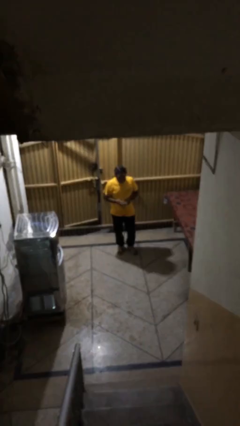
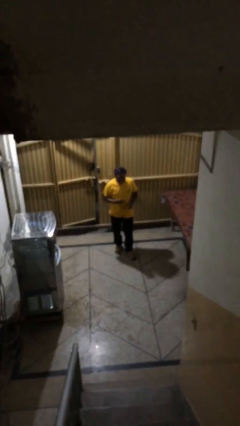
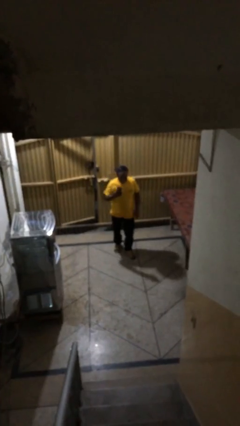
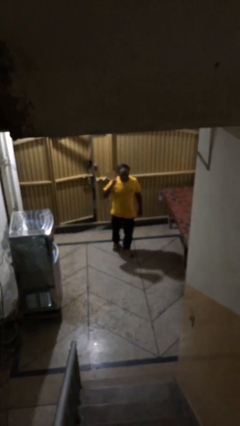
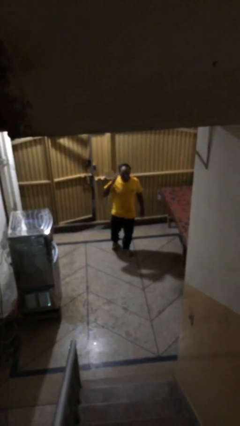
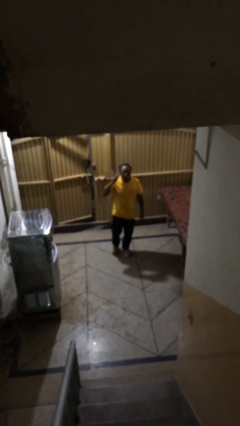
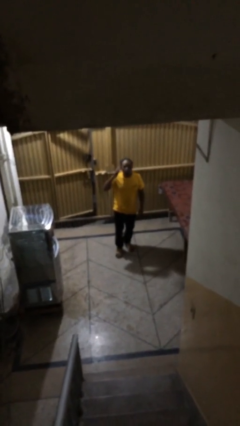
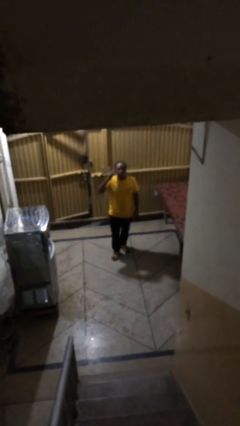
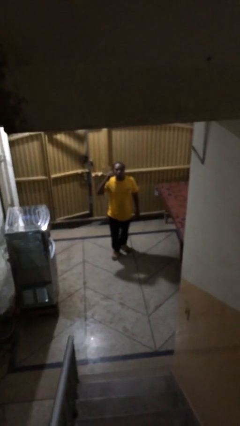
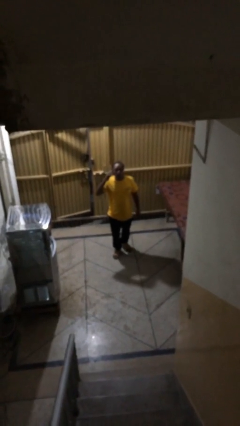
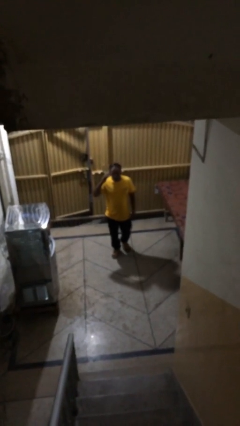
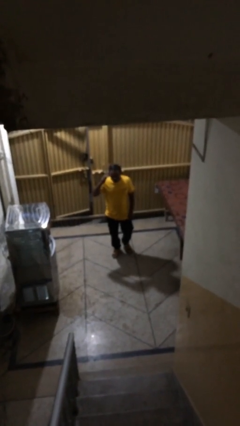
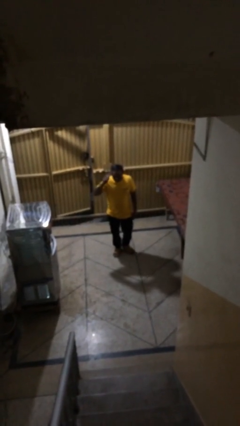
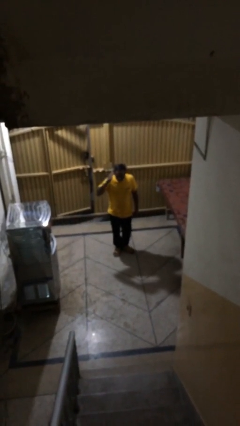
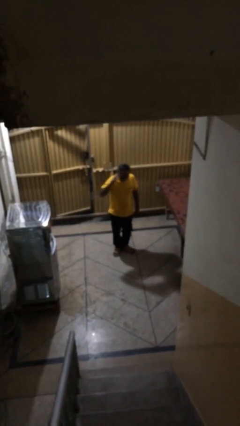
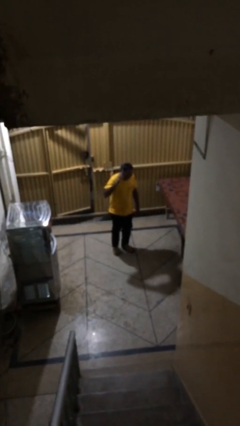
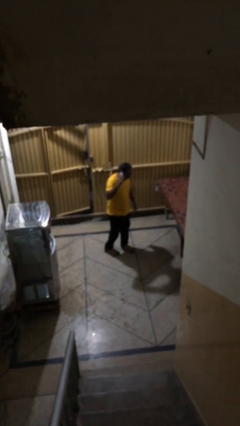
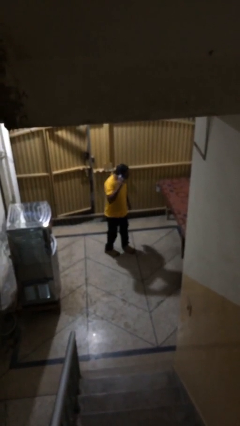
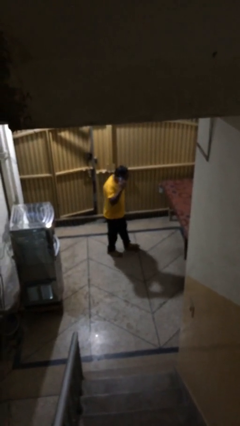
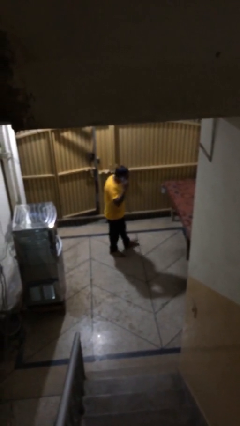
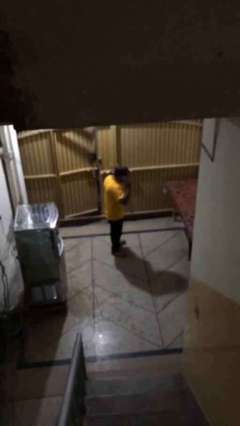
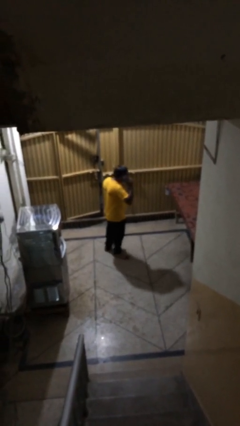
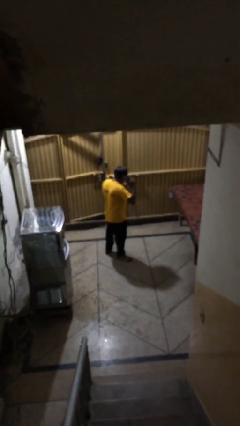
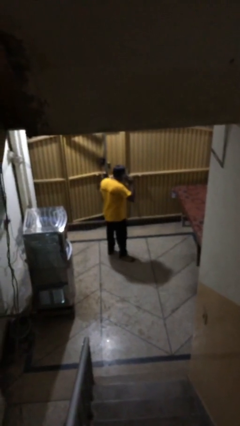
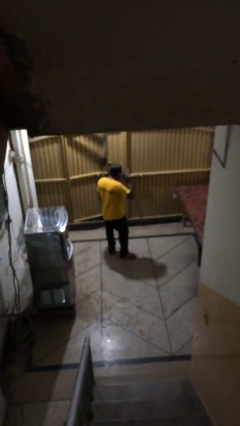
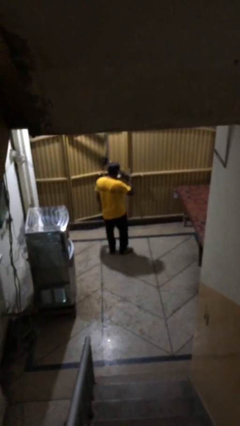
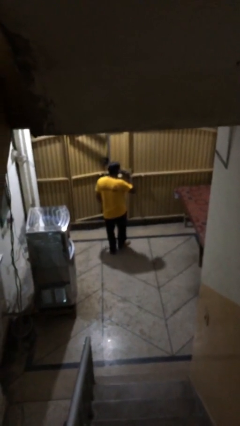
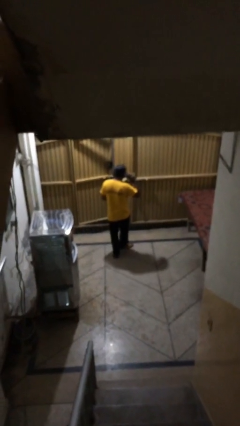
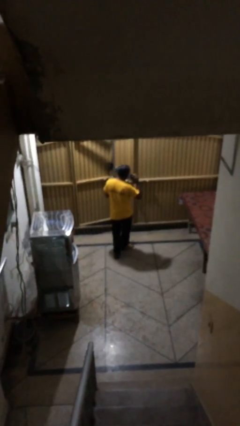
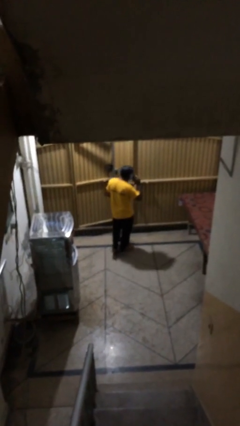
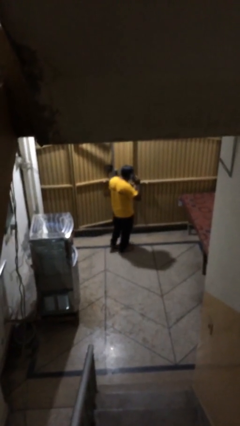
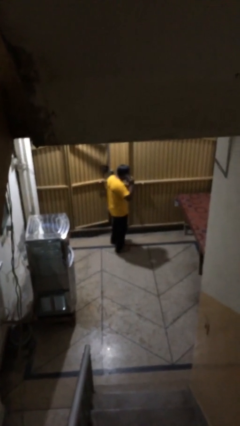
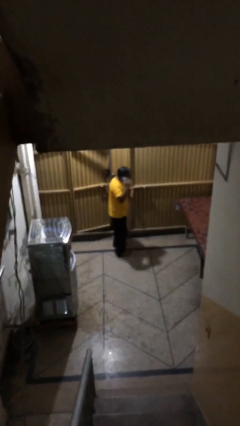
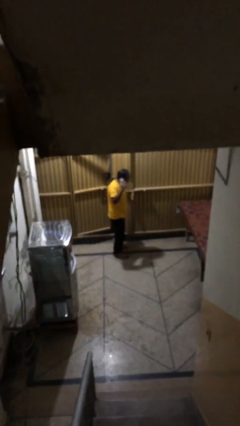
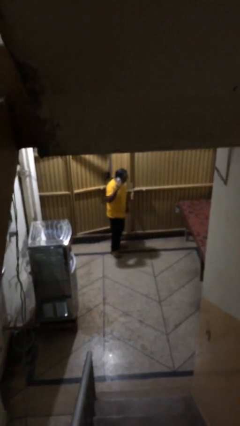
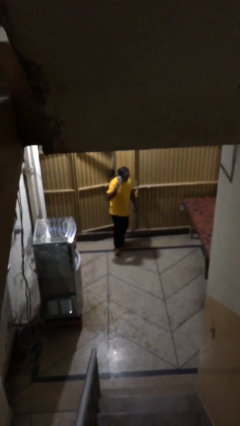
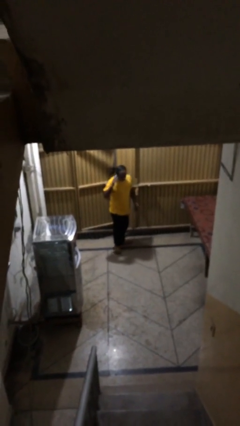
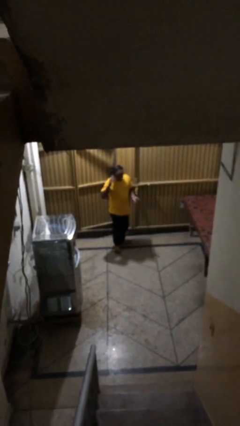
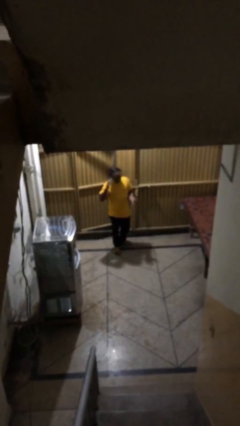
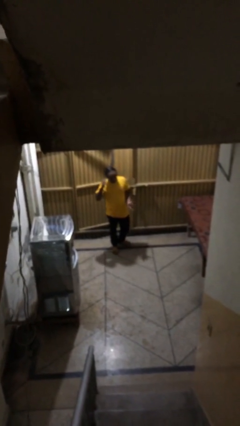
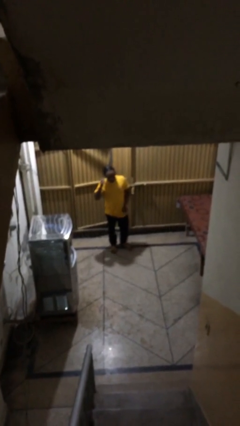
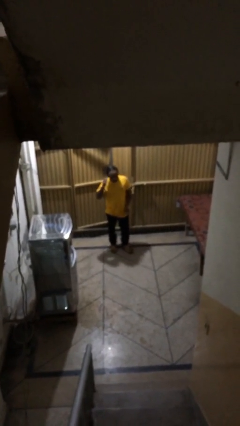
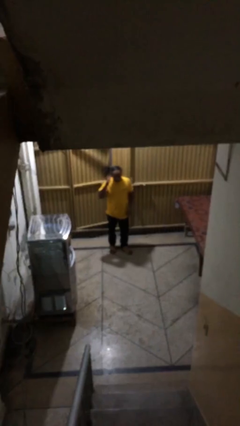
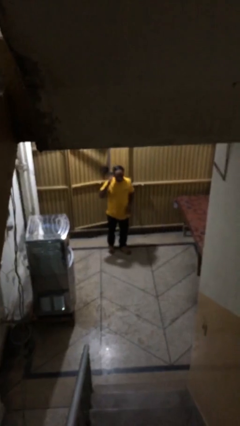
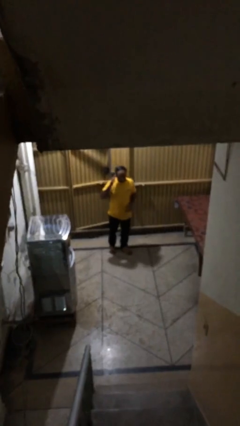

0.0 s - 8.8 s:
person talks on phone

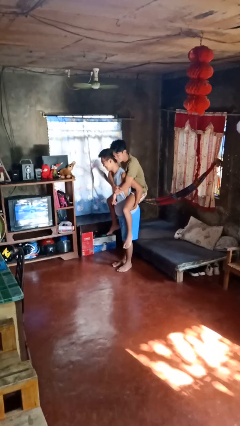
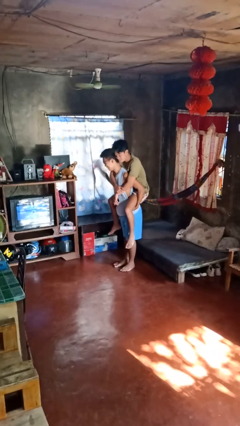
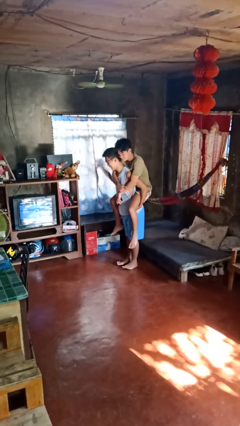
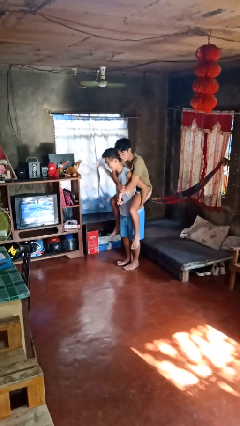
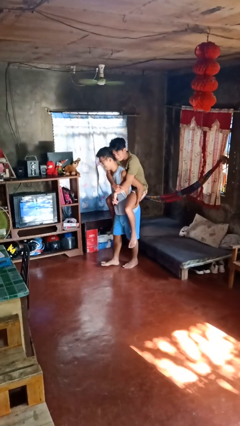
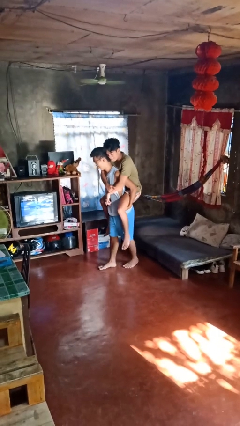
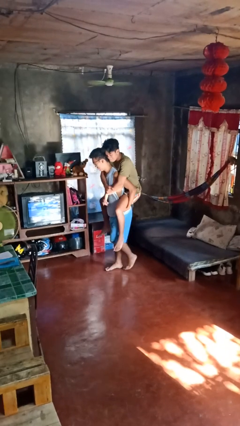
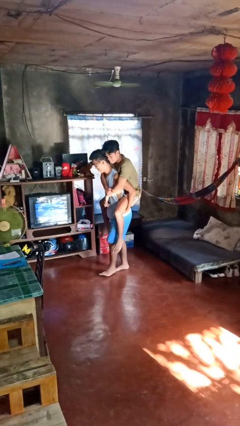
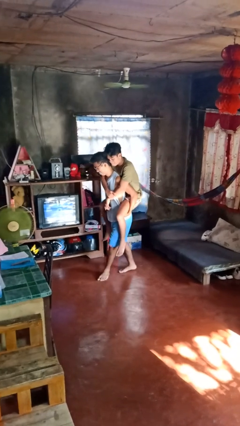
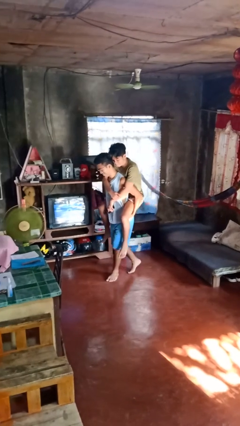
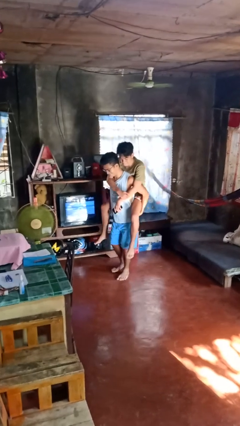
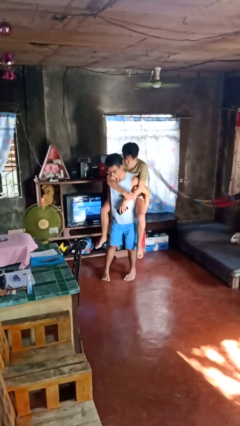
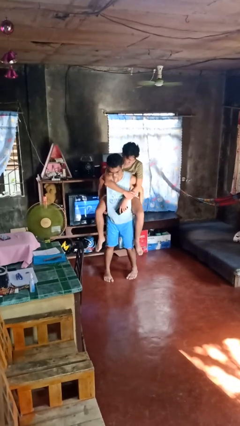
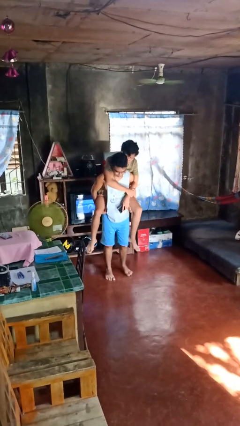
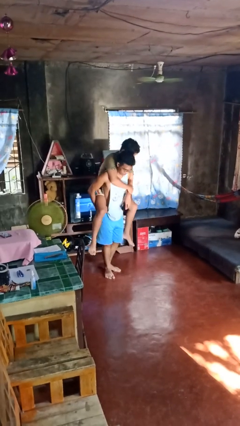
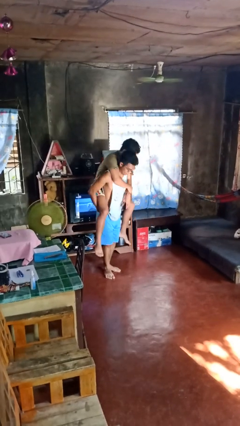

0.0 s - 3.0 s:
person carries person on back

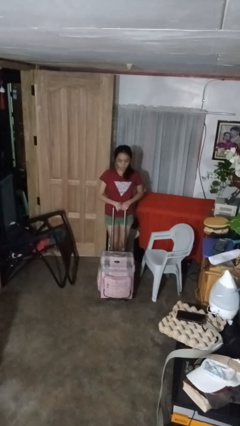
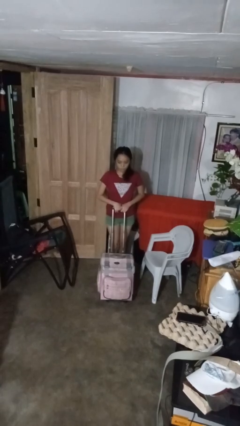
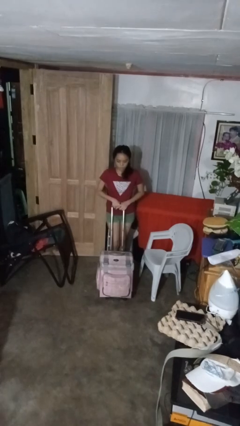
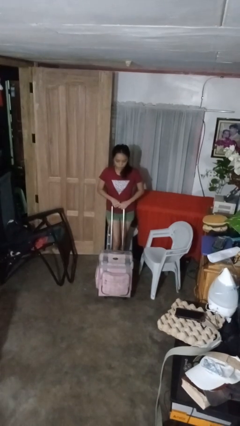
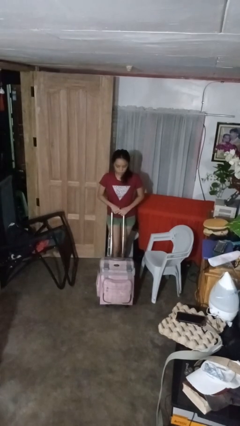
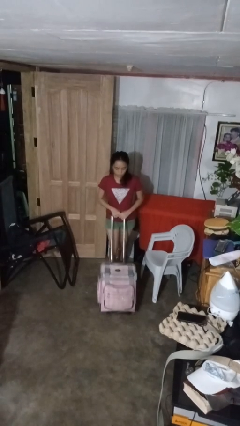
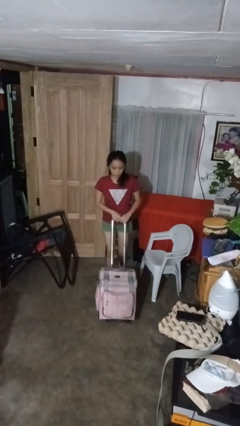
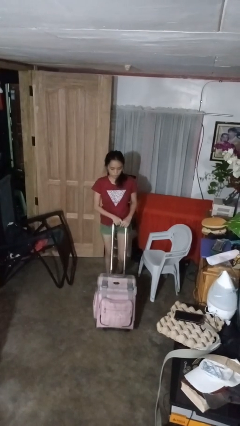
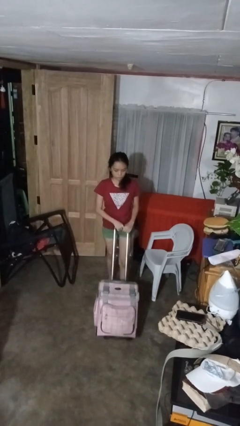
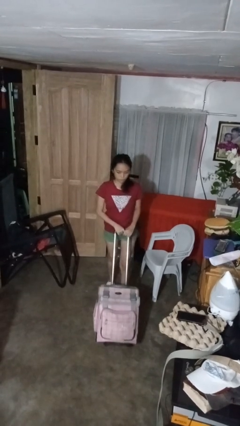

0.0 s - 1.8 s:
person pushes wheeled cart

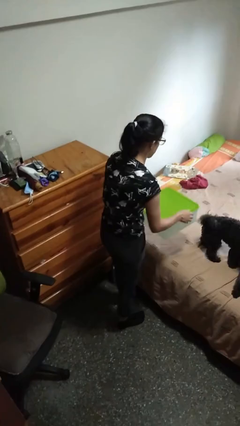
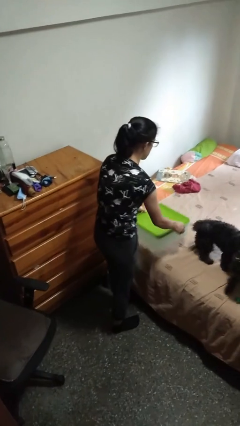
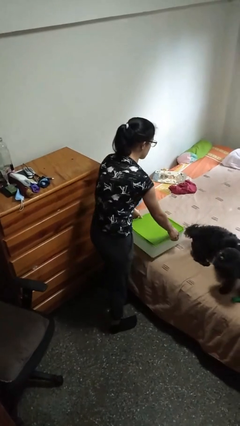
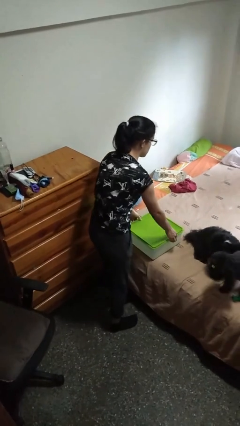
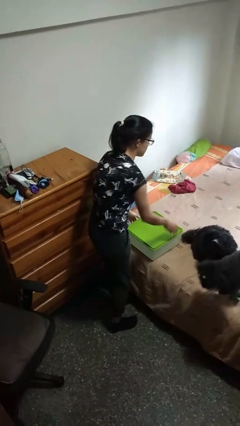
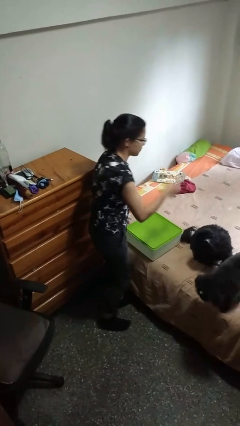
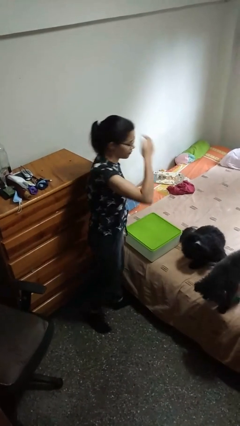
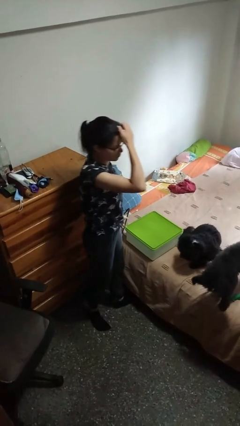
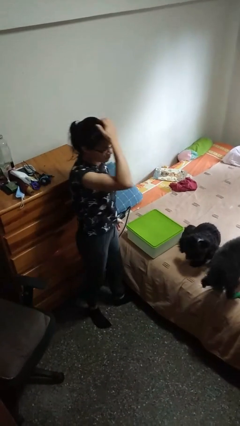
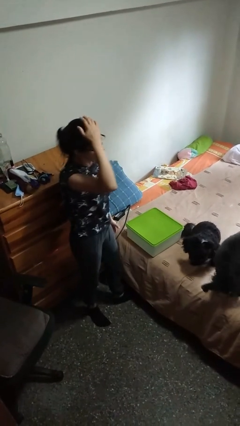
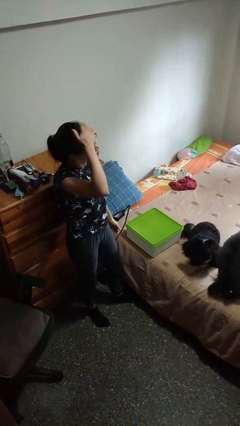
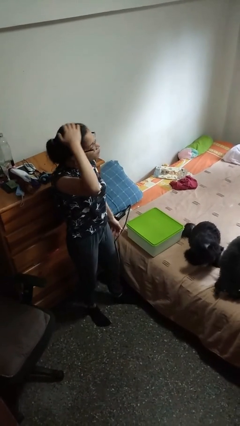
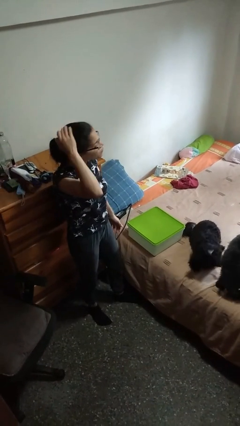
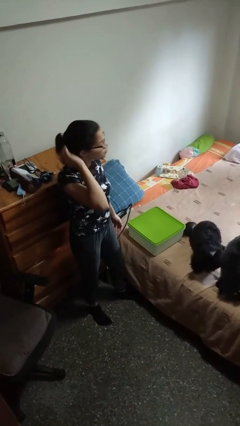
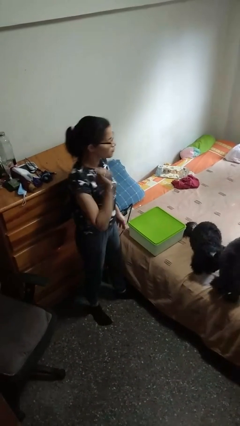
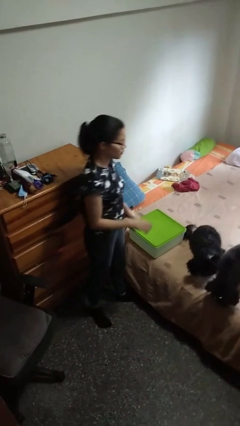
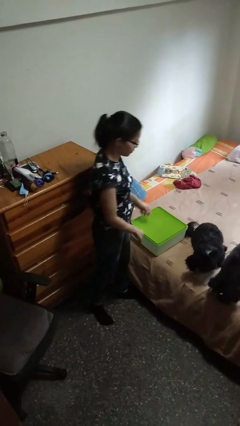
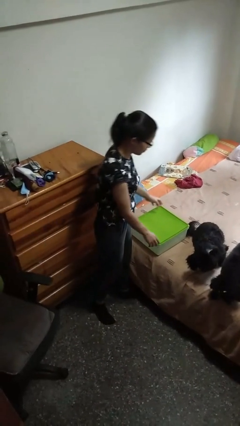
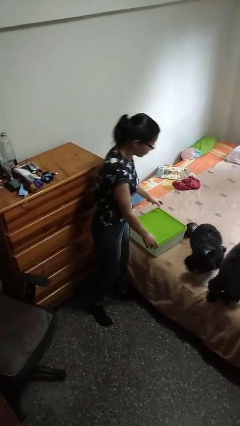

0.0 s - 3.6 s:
person puts down object on bed
